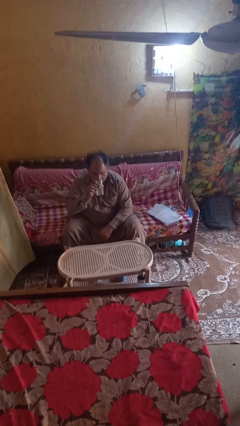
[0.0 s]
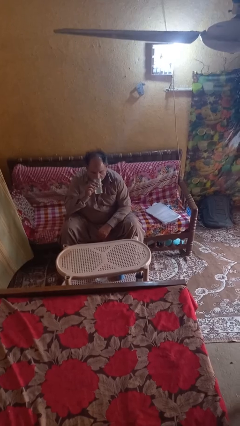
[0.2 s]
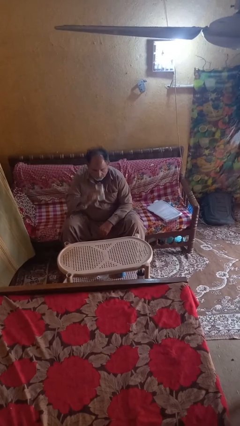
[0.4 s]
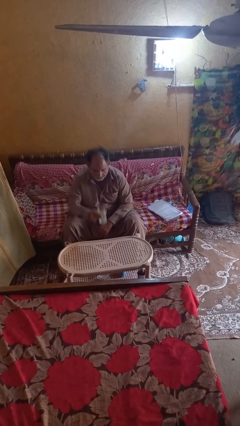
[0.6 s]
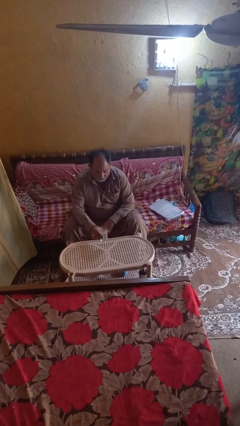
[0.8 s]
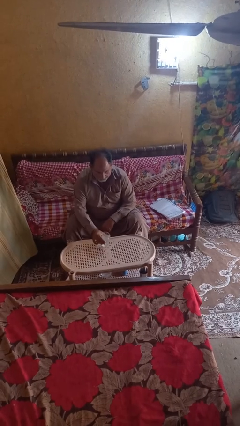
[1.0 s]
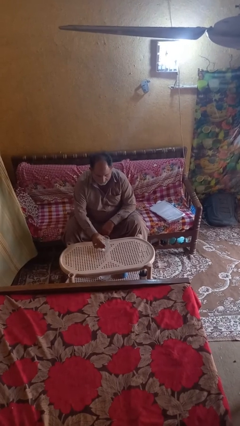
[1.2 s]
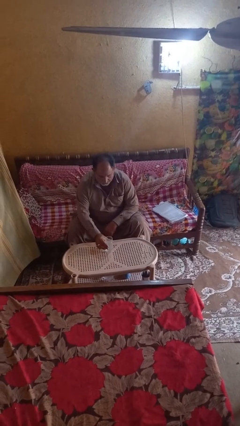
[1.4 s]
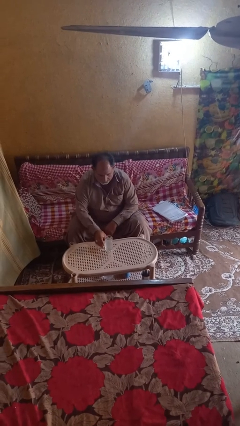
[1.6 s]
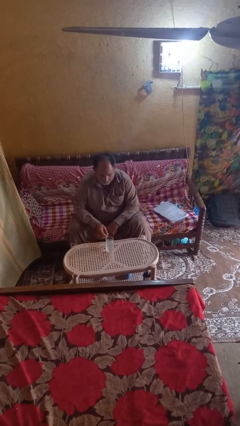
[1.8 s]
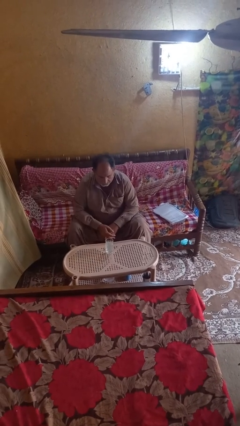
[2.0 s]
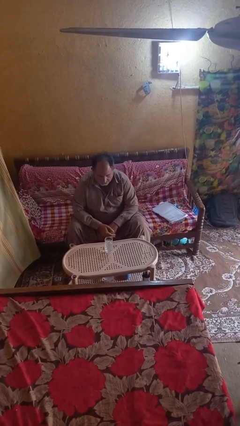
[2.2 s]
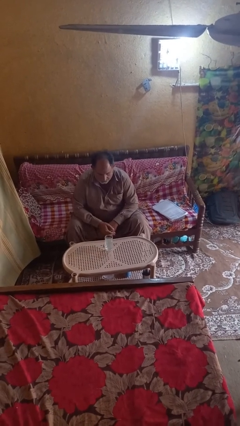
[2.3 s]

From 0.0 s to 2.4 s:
person puts down object on table

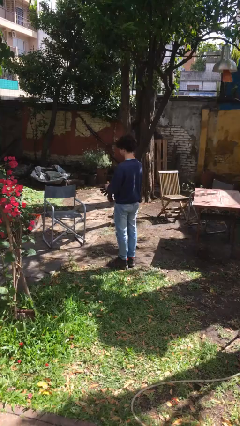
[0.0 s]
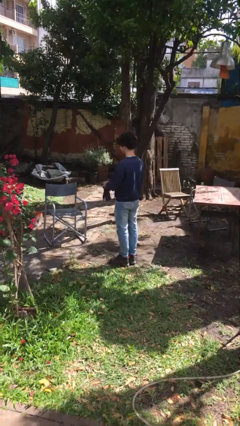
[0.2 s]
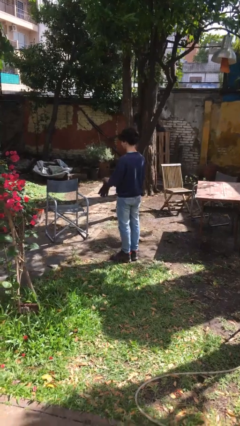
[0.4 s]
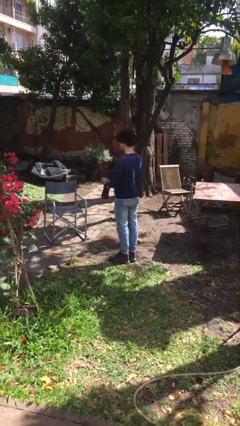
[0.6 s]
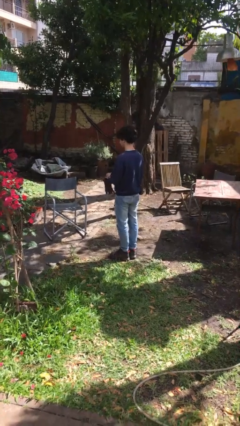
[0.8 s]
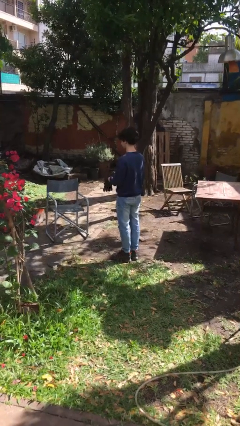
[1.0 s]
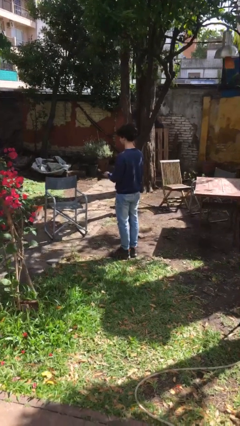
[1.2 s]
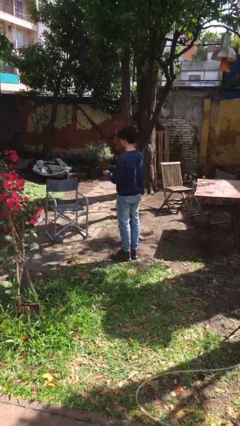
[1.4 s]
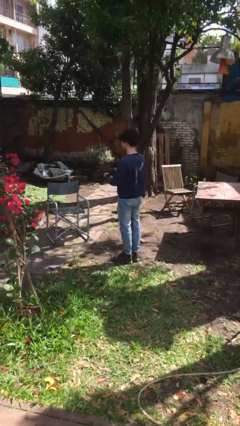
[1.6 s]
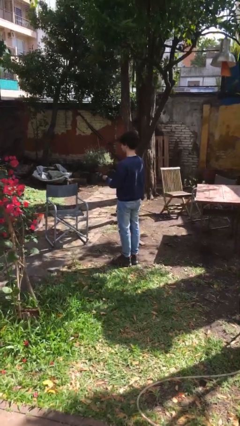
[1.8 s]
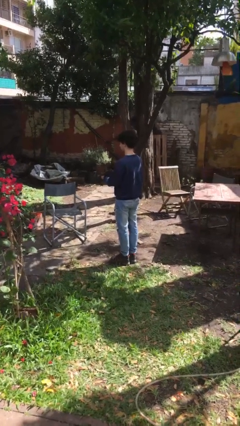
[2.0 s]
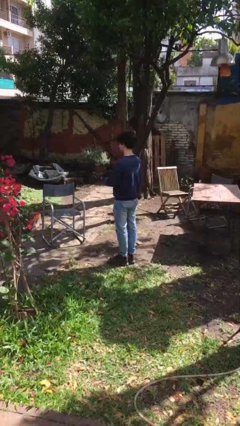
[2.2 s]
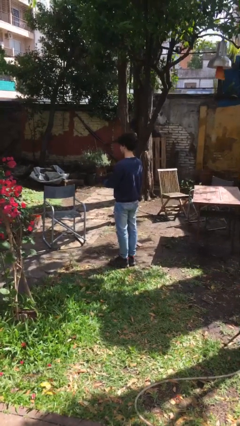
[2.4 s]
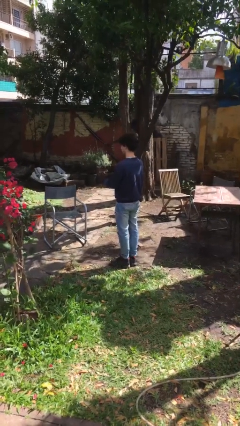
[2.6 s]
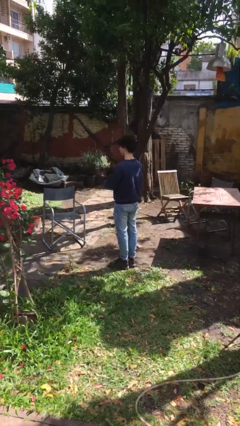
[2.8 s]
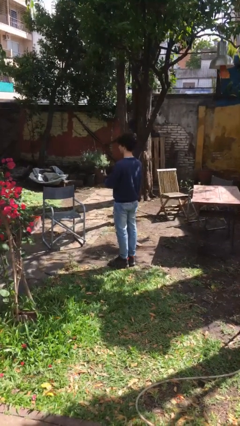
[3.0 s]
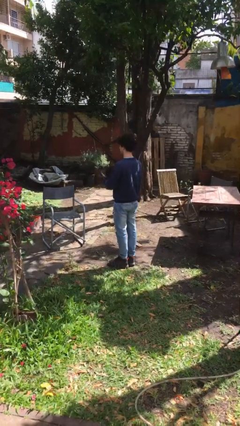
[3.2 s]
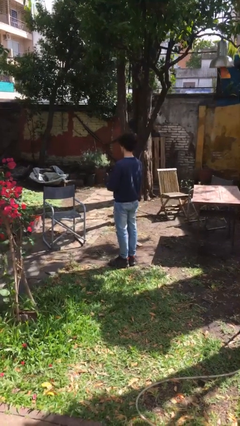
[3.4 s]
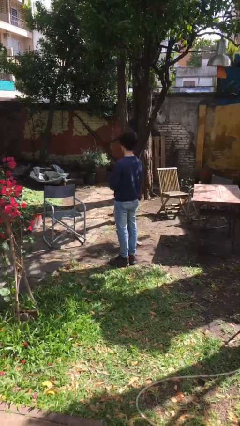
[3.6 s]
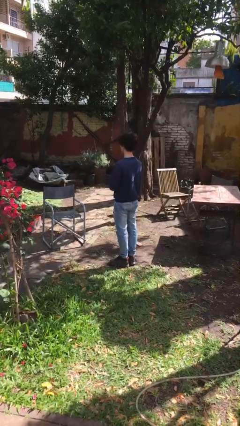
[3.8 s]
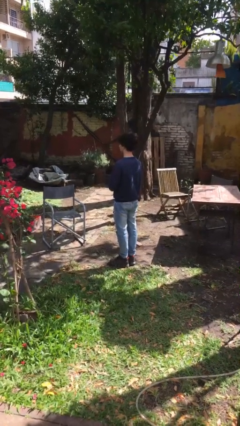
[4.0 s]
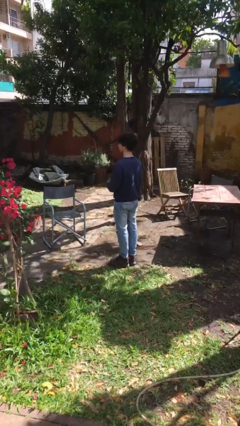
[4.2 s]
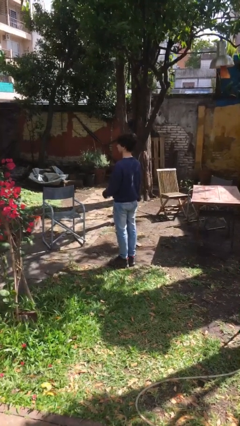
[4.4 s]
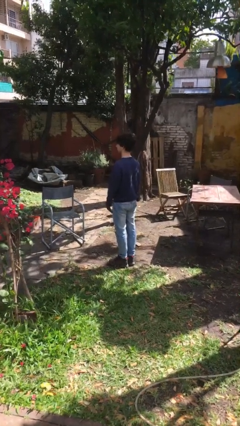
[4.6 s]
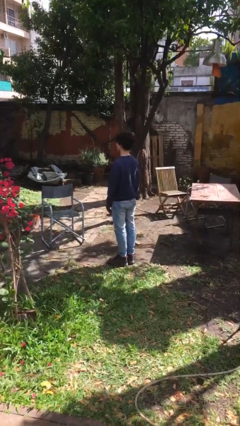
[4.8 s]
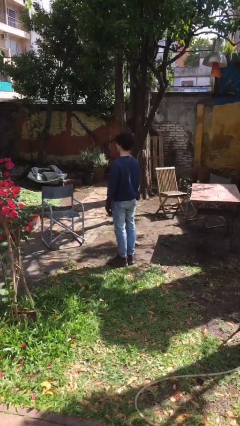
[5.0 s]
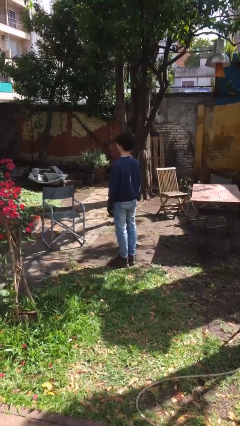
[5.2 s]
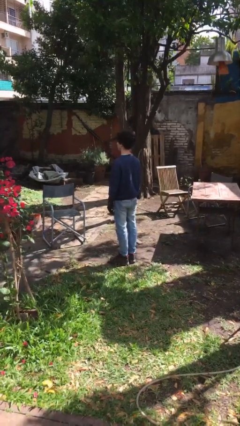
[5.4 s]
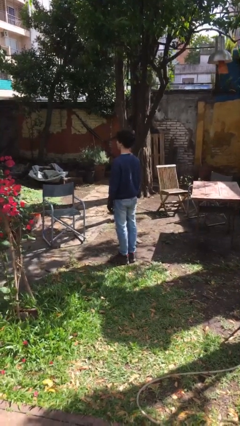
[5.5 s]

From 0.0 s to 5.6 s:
person puts on gloves

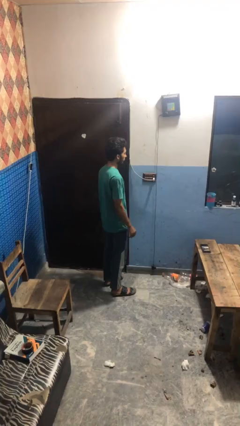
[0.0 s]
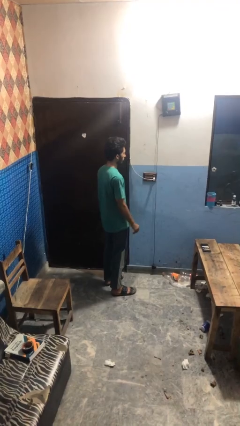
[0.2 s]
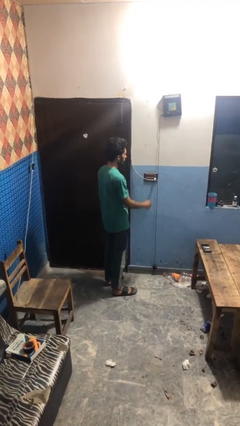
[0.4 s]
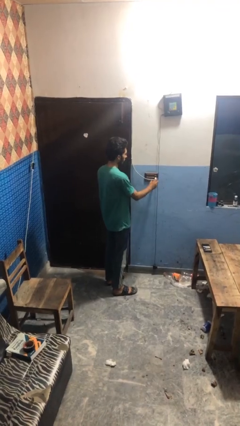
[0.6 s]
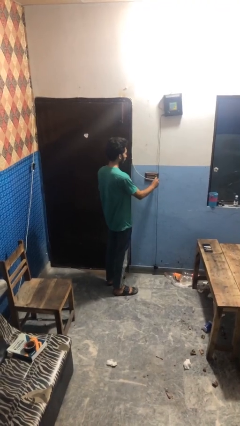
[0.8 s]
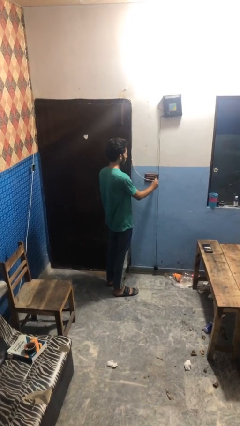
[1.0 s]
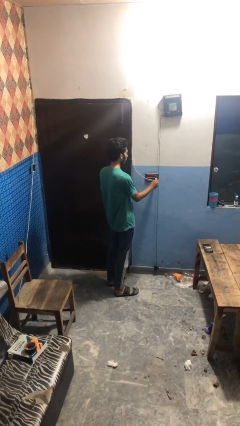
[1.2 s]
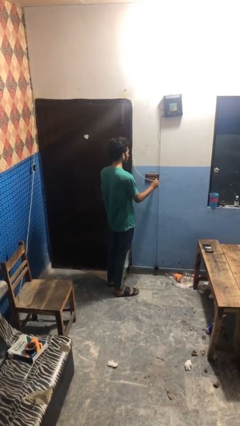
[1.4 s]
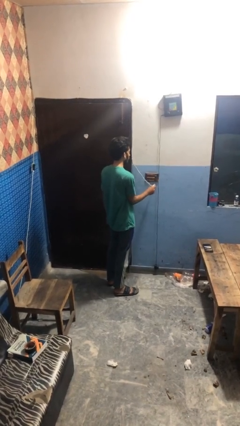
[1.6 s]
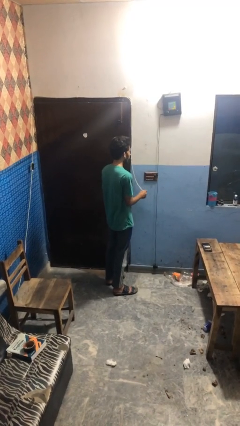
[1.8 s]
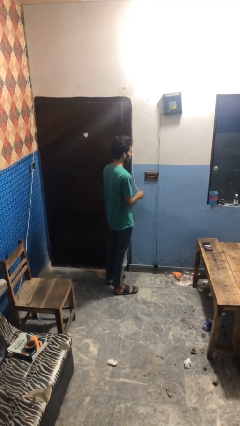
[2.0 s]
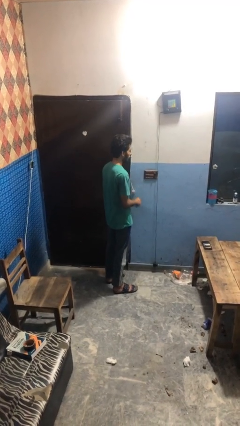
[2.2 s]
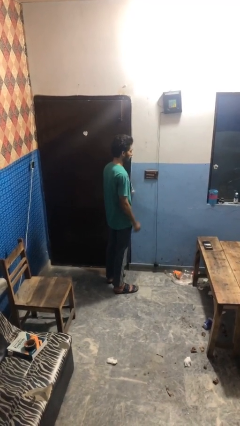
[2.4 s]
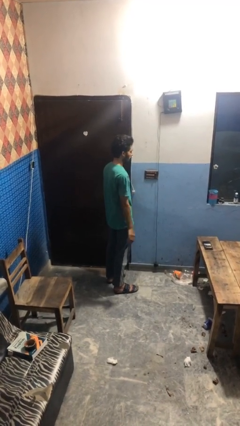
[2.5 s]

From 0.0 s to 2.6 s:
person unplugs from electrical socket

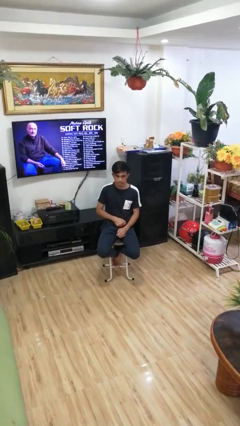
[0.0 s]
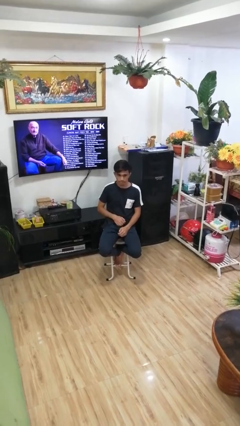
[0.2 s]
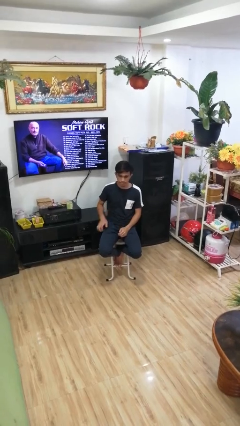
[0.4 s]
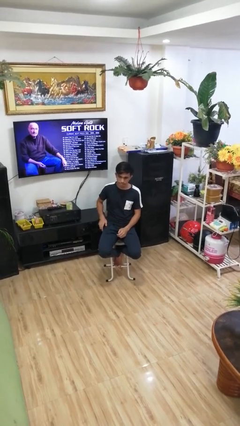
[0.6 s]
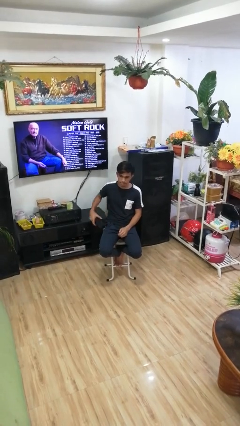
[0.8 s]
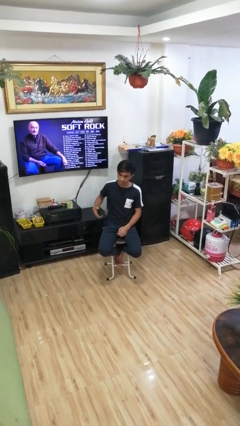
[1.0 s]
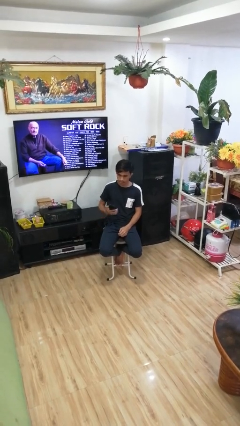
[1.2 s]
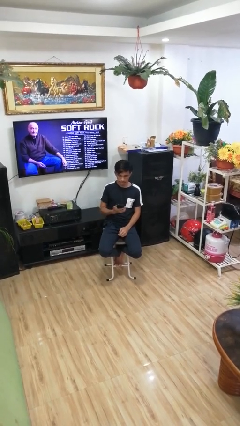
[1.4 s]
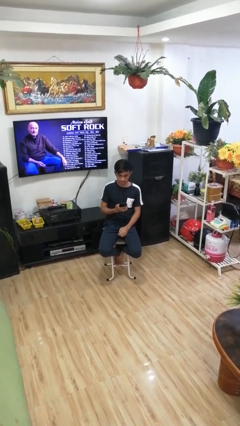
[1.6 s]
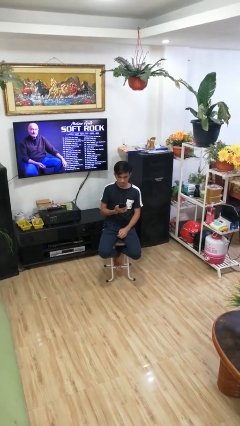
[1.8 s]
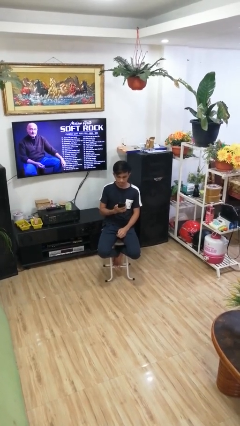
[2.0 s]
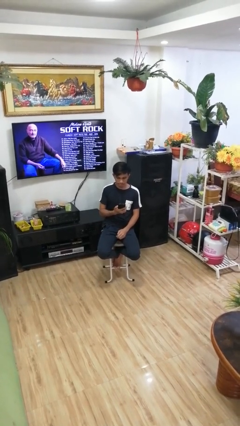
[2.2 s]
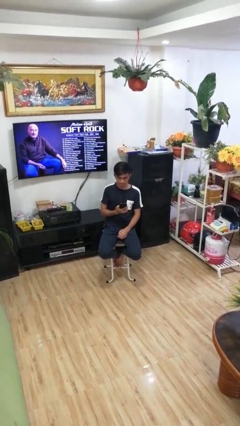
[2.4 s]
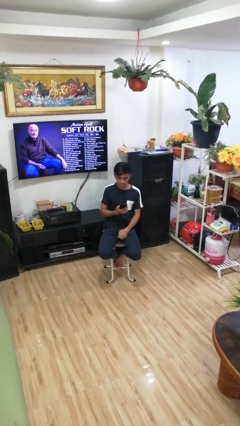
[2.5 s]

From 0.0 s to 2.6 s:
person takes phone from pocket

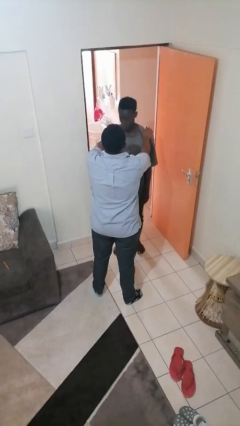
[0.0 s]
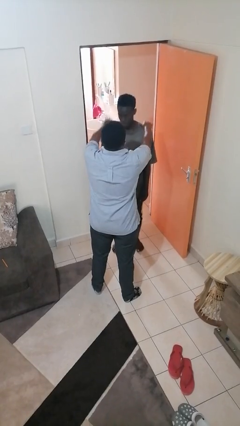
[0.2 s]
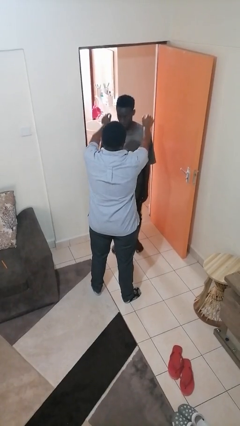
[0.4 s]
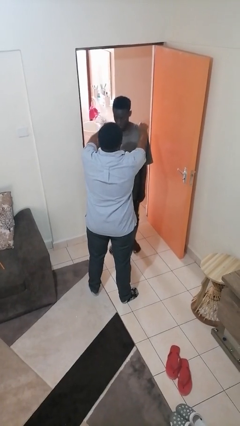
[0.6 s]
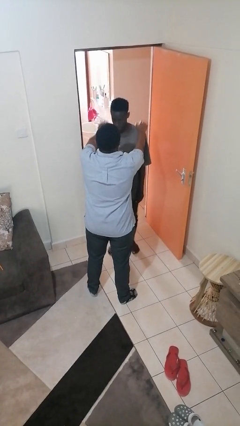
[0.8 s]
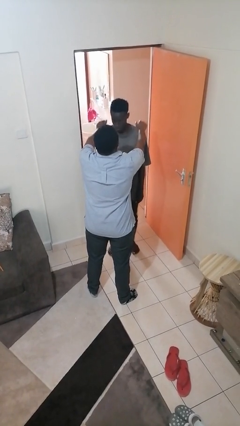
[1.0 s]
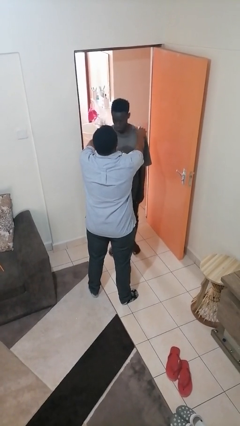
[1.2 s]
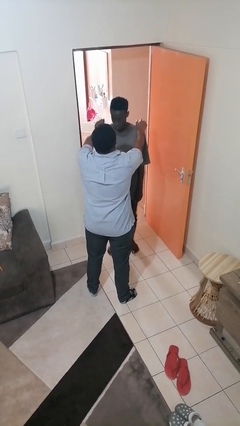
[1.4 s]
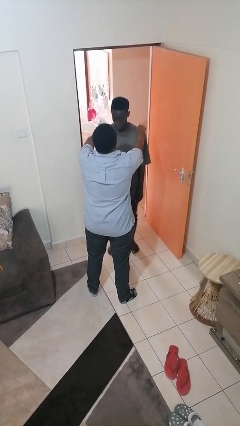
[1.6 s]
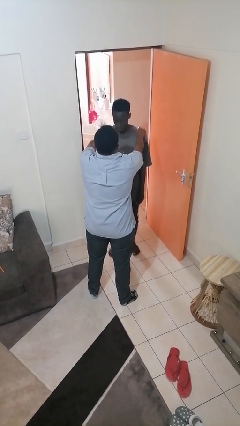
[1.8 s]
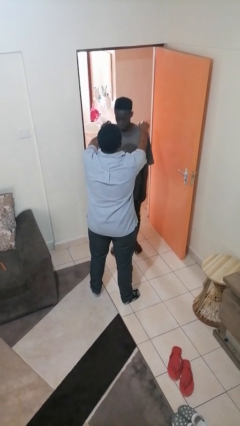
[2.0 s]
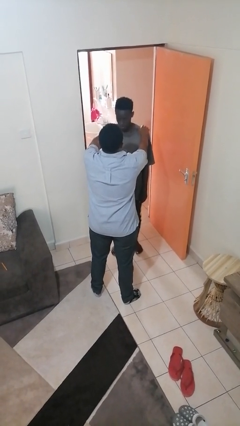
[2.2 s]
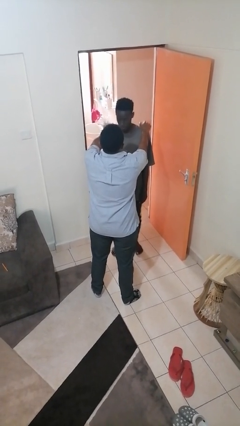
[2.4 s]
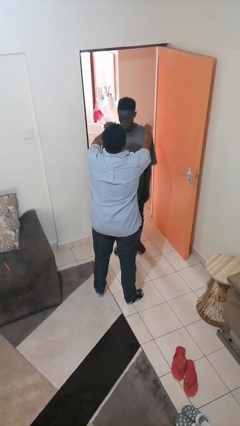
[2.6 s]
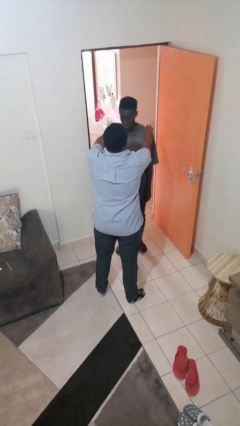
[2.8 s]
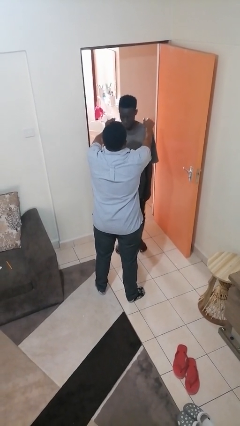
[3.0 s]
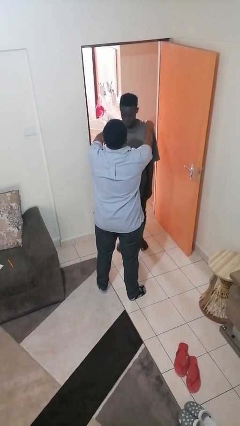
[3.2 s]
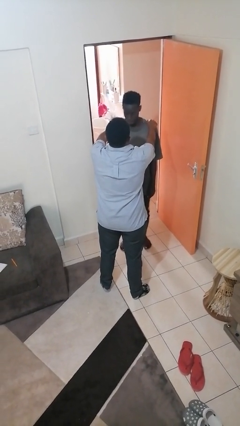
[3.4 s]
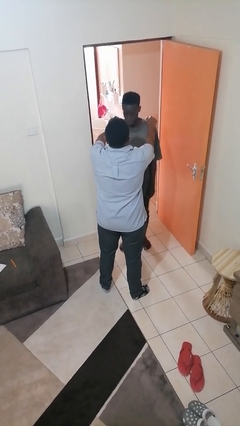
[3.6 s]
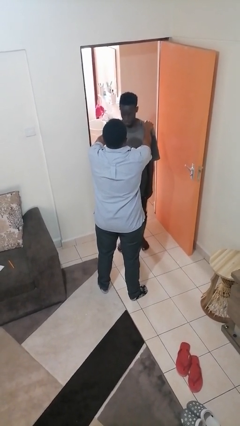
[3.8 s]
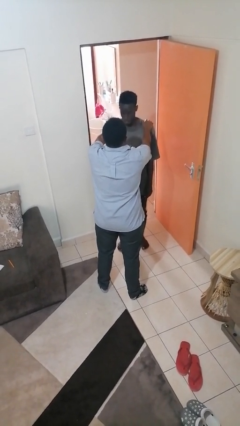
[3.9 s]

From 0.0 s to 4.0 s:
person pounds shoulders of person

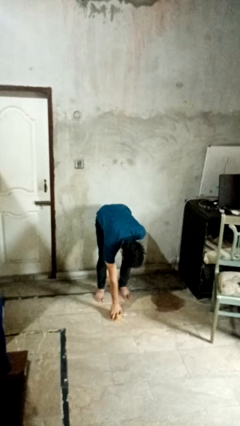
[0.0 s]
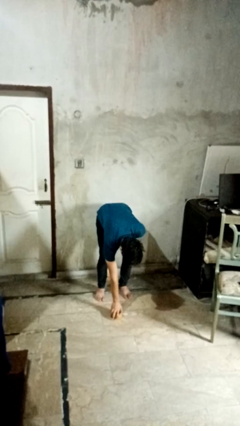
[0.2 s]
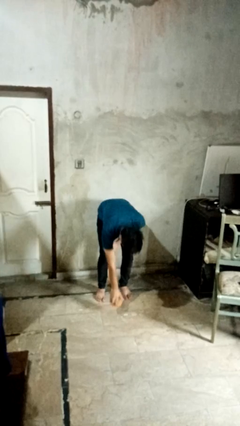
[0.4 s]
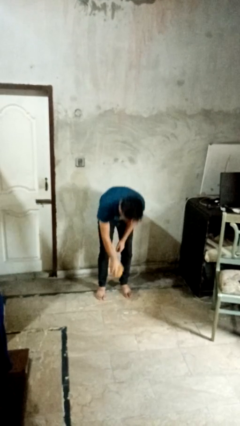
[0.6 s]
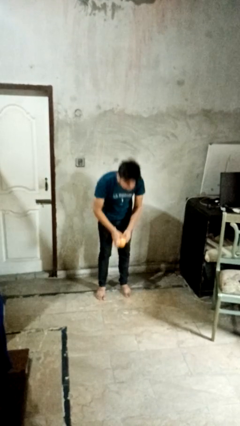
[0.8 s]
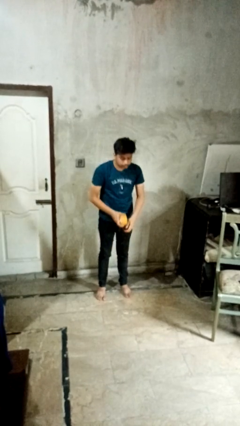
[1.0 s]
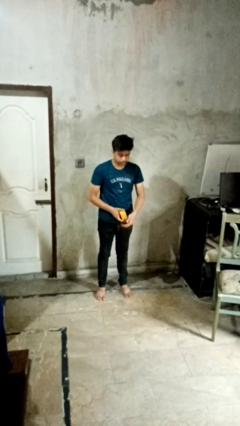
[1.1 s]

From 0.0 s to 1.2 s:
person picks up object from floor
